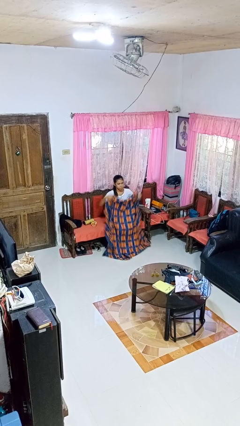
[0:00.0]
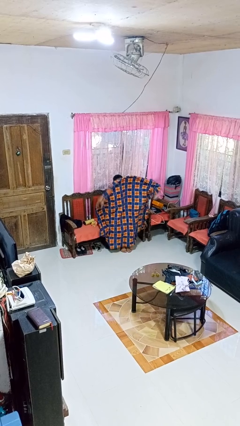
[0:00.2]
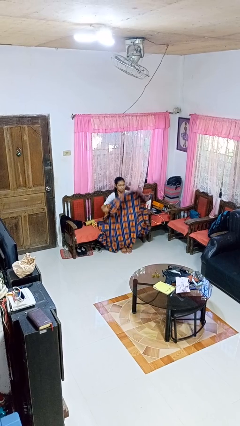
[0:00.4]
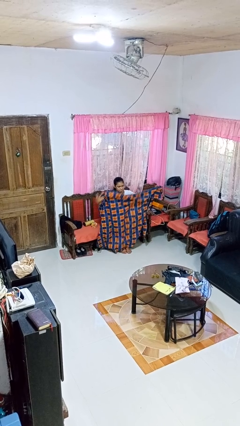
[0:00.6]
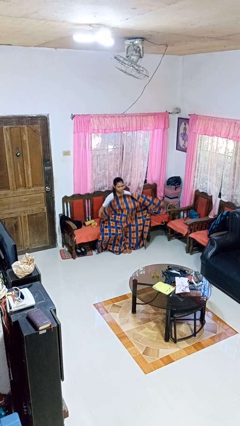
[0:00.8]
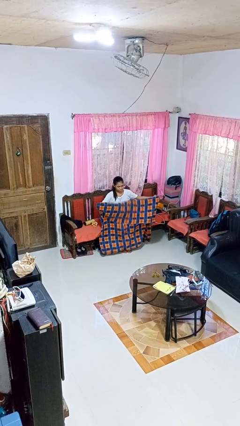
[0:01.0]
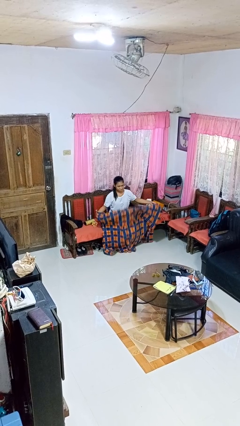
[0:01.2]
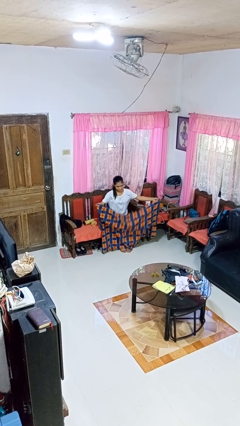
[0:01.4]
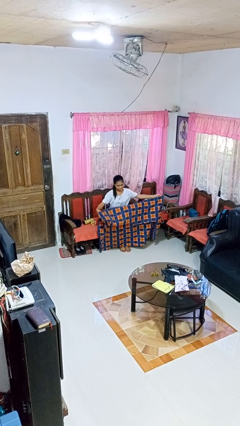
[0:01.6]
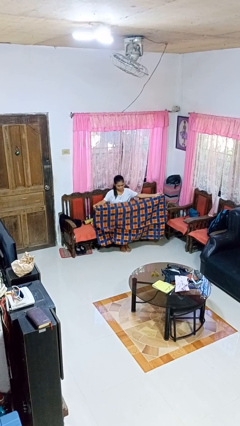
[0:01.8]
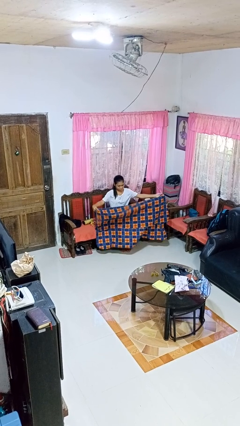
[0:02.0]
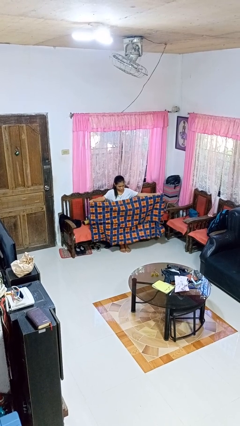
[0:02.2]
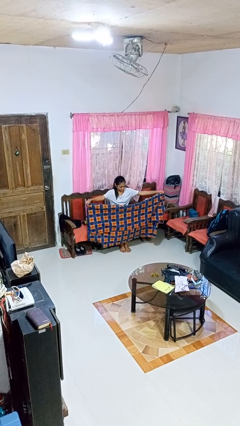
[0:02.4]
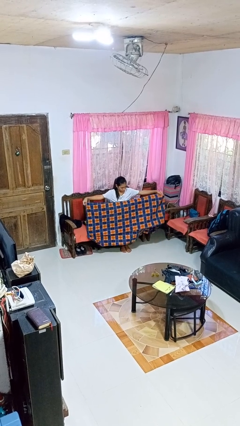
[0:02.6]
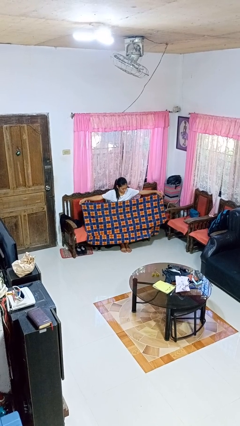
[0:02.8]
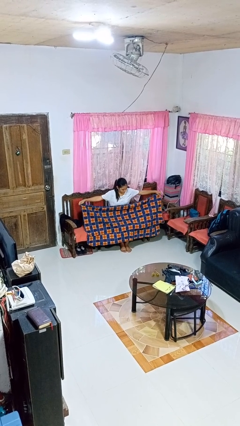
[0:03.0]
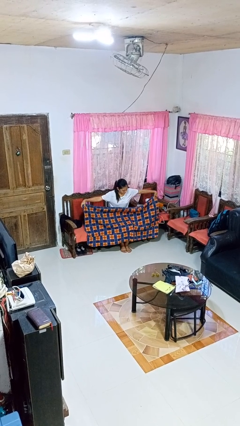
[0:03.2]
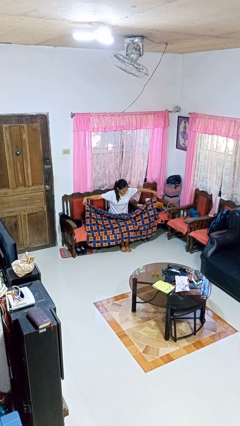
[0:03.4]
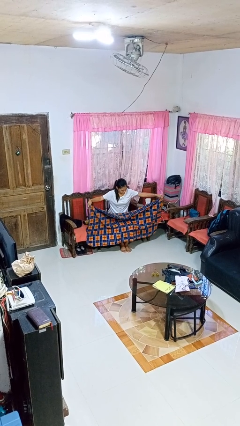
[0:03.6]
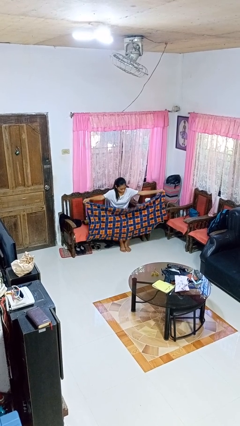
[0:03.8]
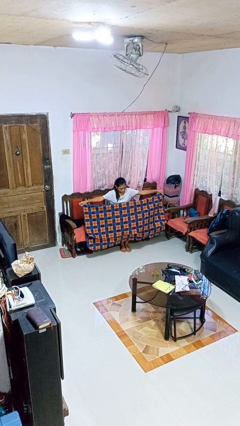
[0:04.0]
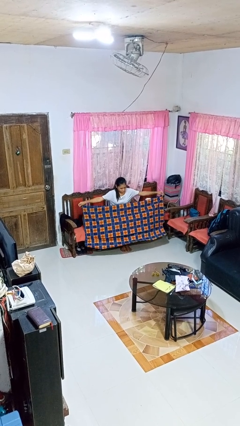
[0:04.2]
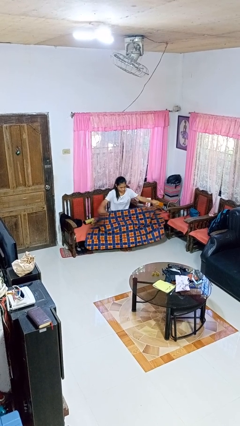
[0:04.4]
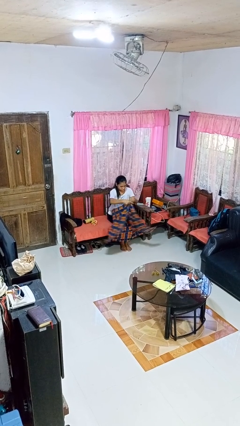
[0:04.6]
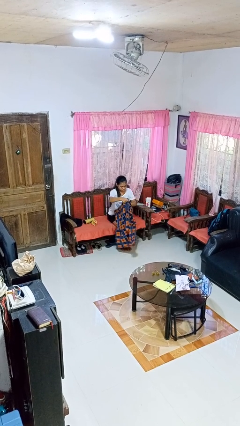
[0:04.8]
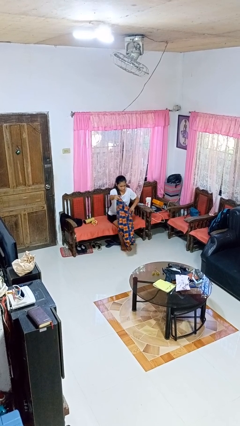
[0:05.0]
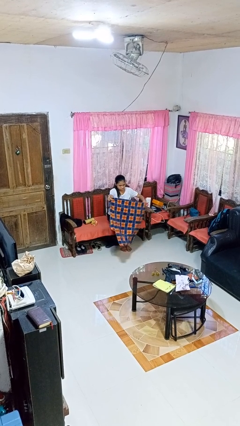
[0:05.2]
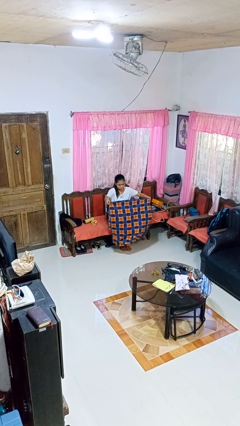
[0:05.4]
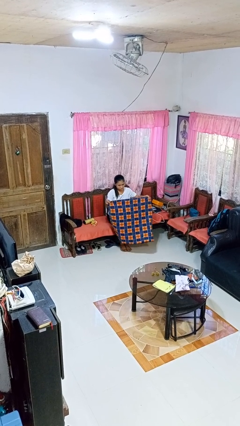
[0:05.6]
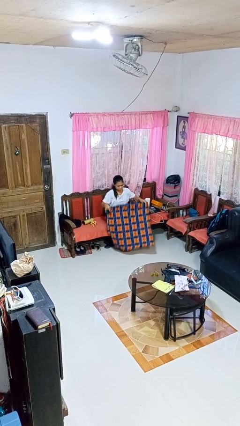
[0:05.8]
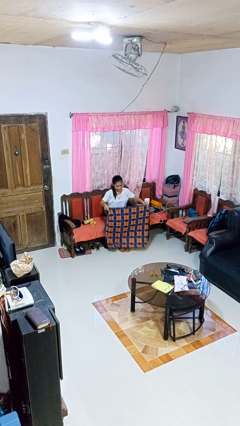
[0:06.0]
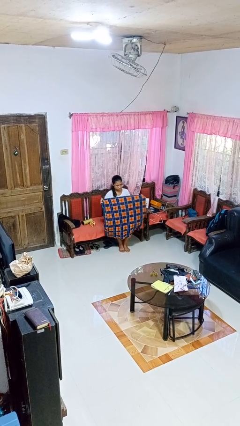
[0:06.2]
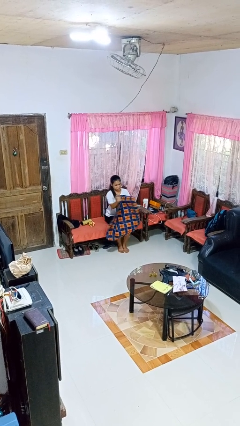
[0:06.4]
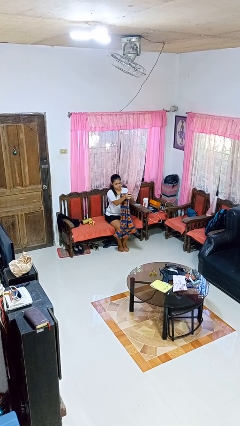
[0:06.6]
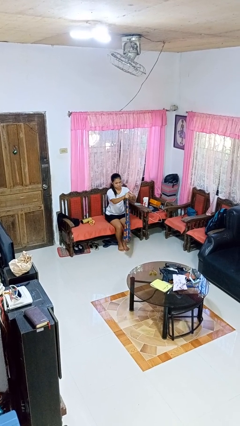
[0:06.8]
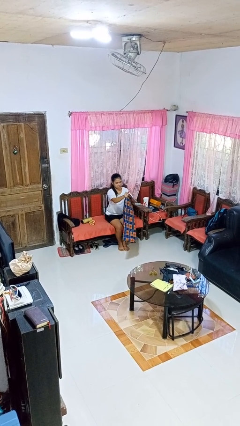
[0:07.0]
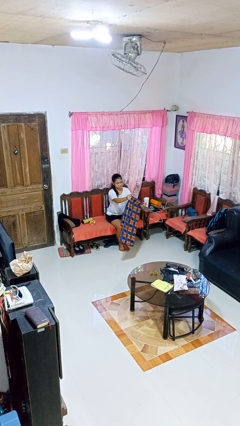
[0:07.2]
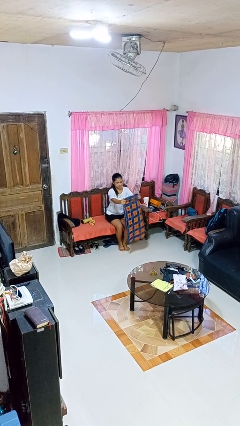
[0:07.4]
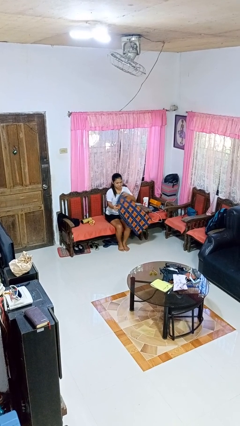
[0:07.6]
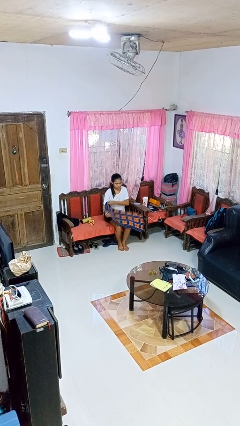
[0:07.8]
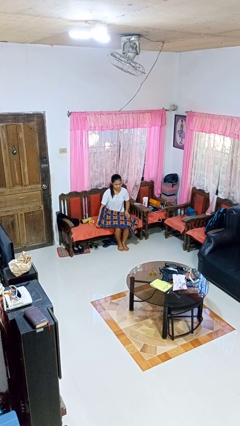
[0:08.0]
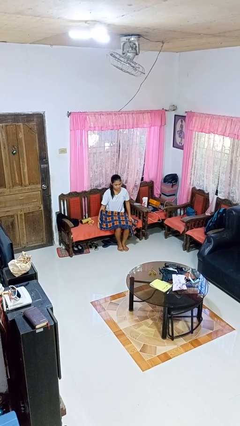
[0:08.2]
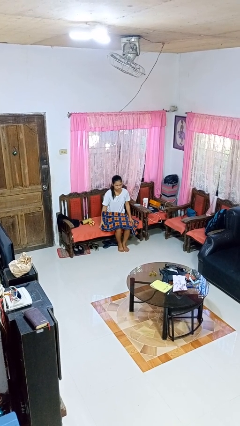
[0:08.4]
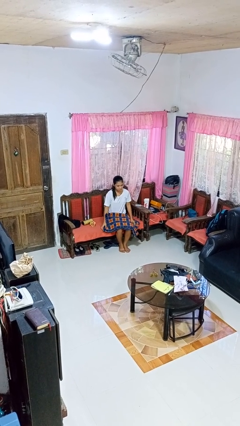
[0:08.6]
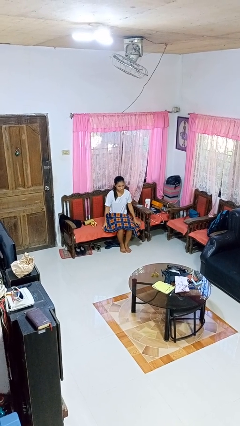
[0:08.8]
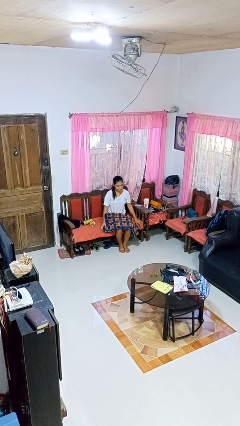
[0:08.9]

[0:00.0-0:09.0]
person folds blanket

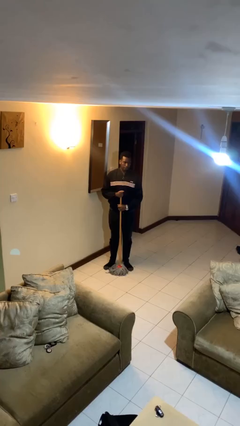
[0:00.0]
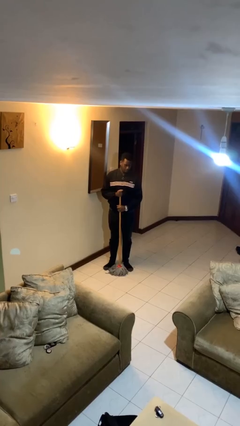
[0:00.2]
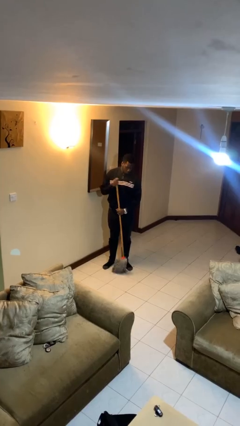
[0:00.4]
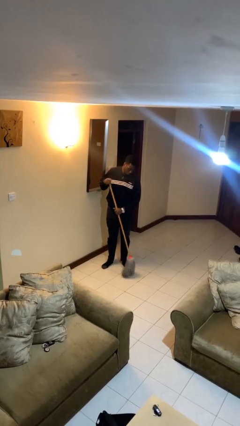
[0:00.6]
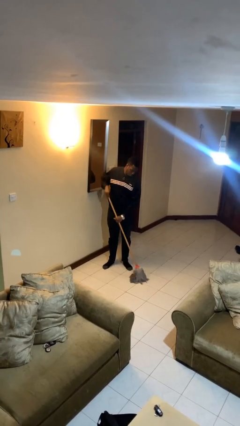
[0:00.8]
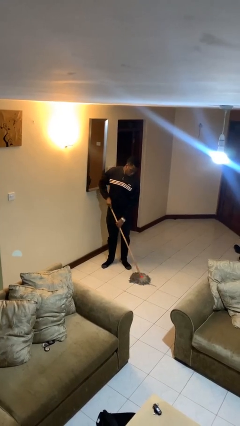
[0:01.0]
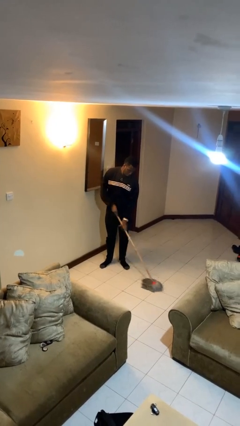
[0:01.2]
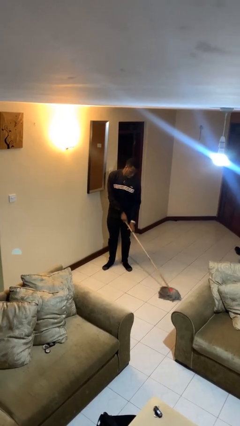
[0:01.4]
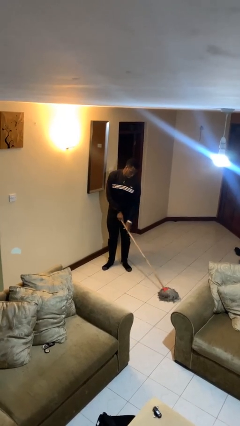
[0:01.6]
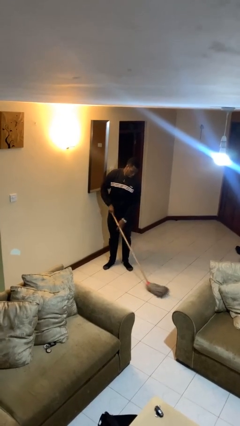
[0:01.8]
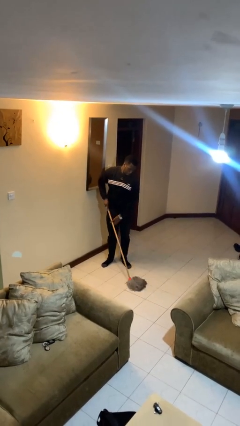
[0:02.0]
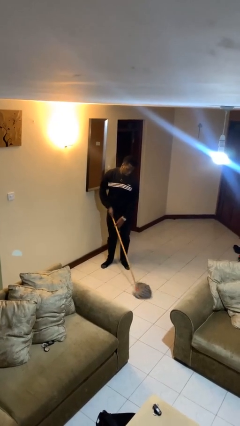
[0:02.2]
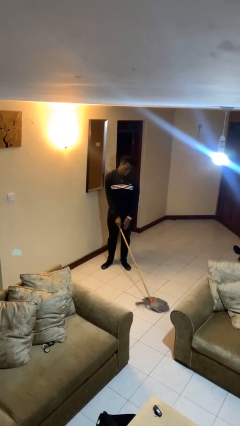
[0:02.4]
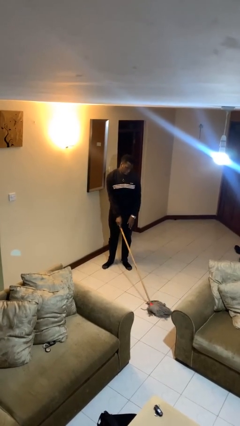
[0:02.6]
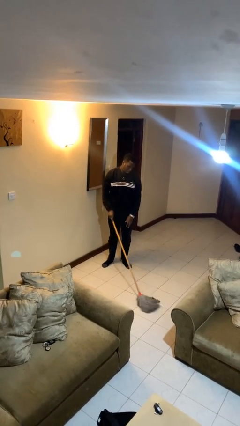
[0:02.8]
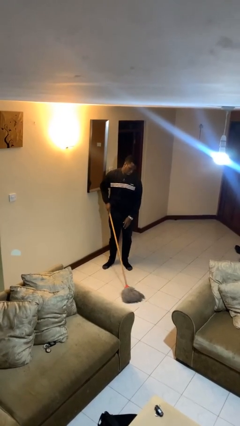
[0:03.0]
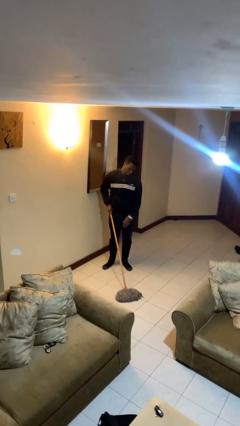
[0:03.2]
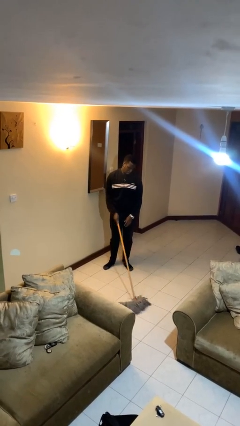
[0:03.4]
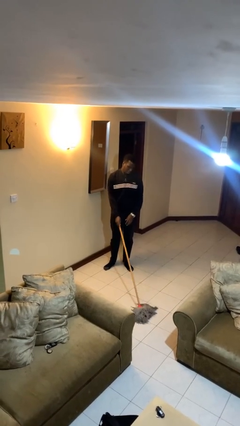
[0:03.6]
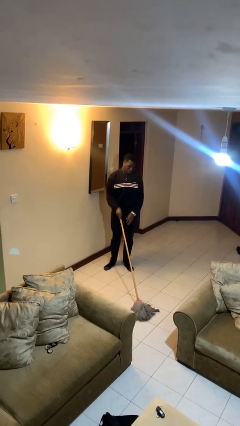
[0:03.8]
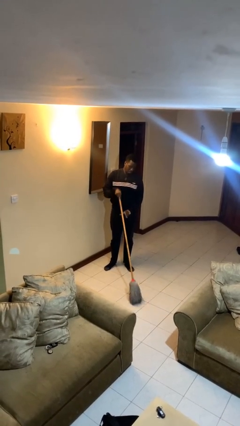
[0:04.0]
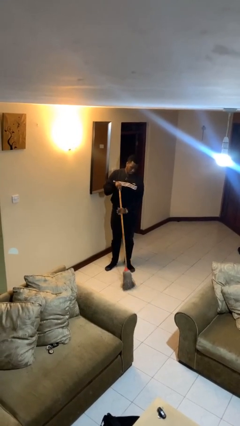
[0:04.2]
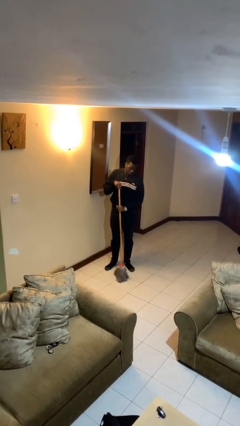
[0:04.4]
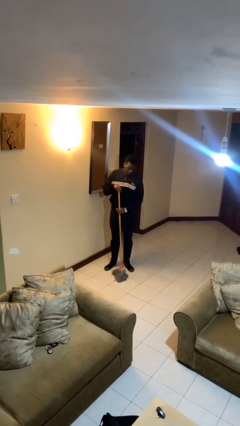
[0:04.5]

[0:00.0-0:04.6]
person mops

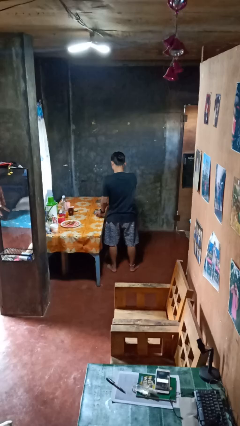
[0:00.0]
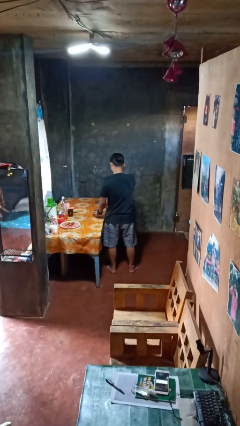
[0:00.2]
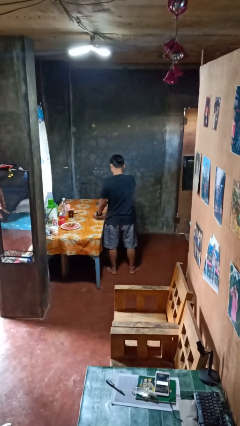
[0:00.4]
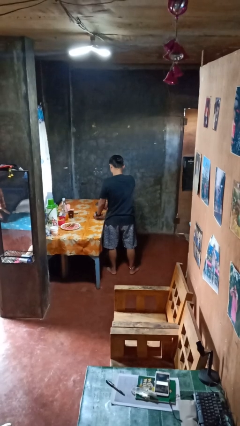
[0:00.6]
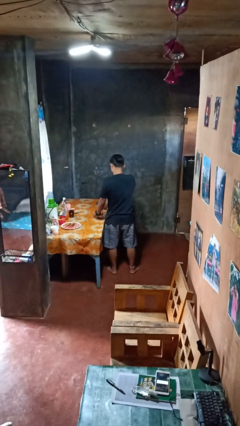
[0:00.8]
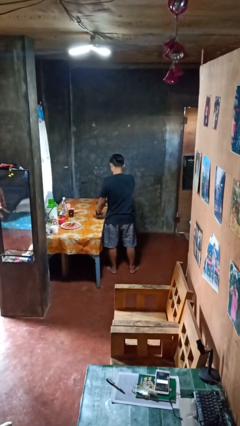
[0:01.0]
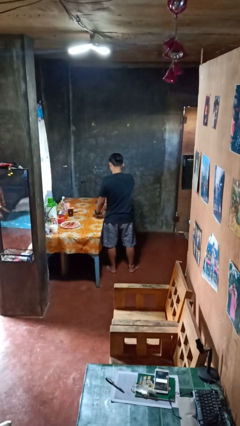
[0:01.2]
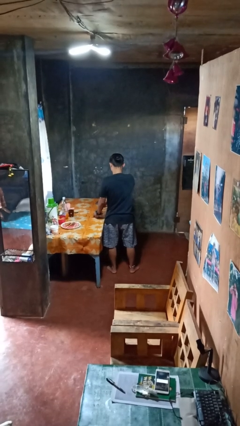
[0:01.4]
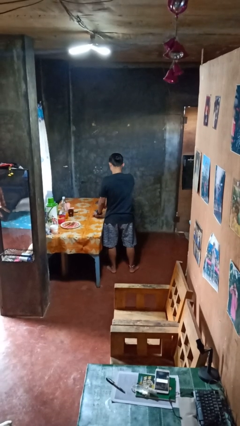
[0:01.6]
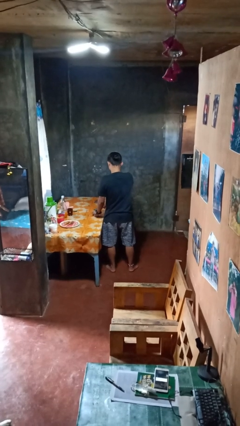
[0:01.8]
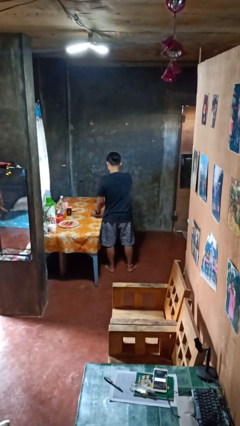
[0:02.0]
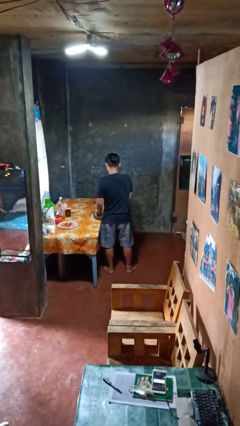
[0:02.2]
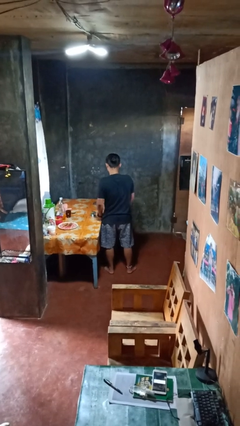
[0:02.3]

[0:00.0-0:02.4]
person opens can with can opener

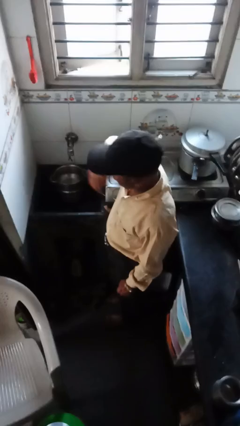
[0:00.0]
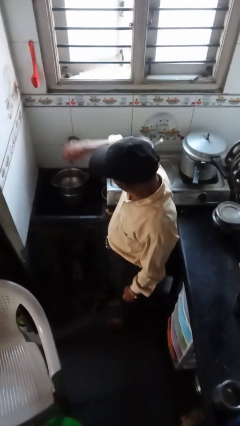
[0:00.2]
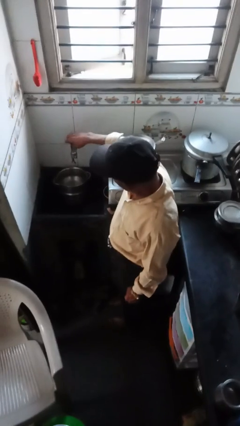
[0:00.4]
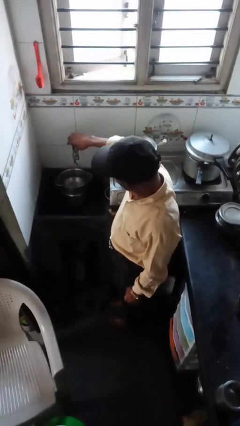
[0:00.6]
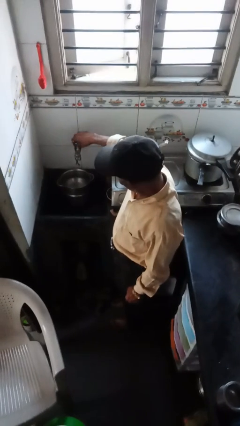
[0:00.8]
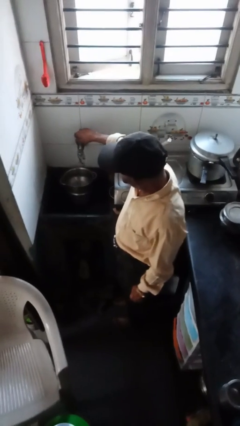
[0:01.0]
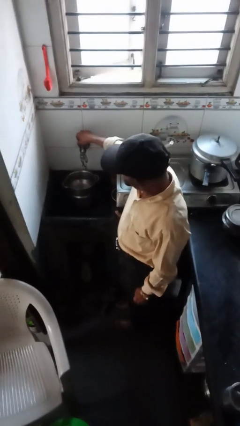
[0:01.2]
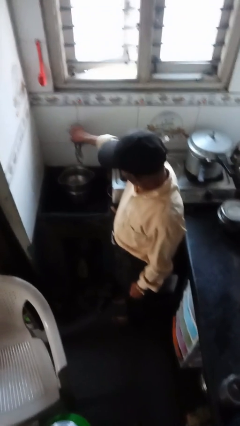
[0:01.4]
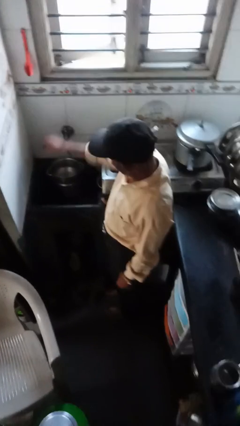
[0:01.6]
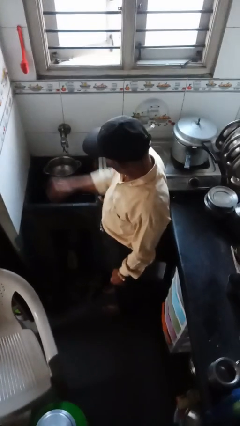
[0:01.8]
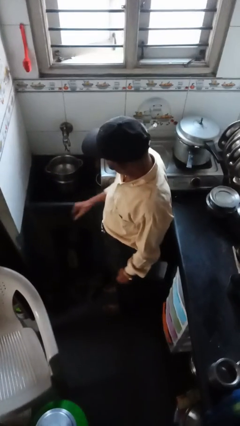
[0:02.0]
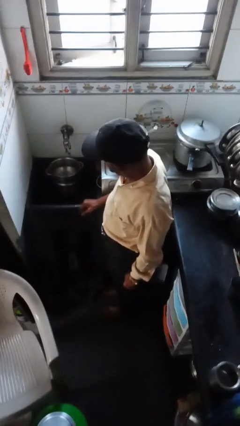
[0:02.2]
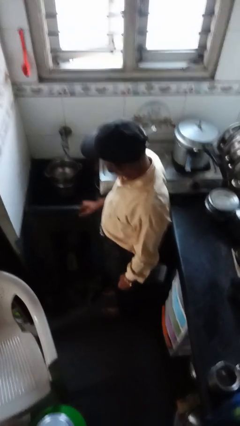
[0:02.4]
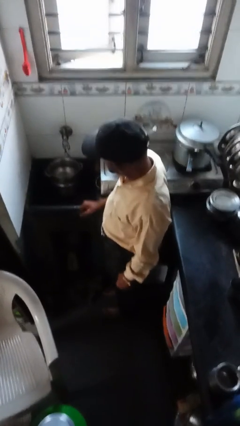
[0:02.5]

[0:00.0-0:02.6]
person turns off faucet
